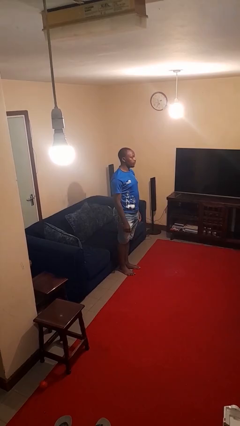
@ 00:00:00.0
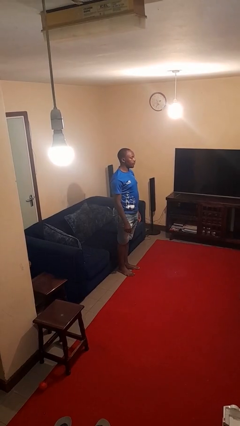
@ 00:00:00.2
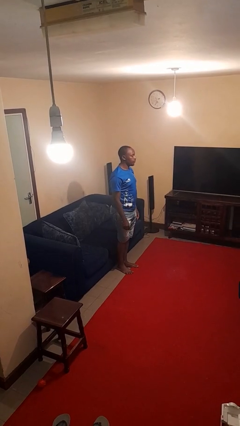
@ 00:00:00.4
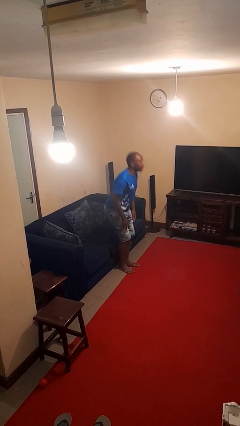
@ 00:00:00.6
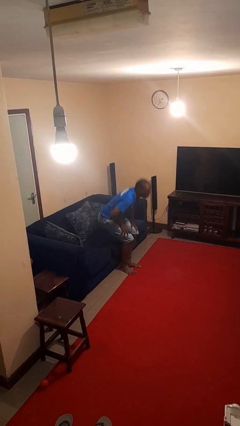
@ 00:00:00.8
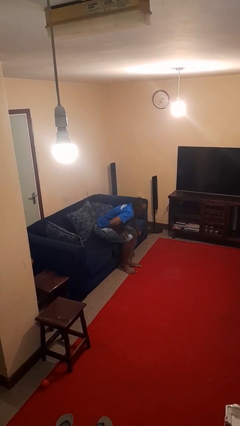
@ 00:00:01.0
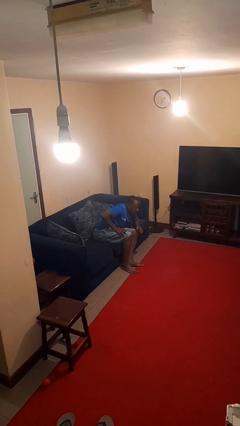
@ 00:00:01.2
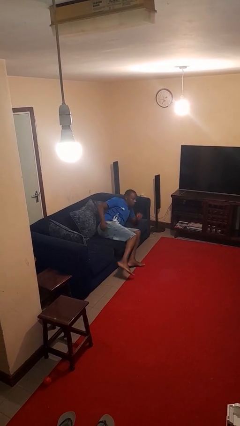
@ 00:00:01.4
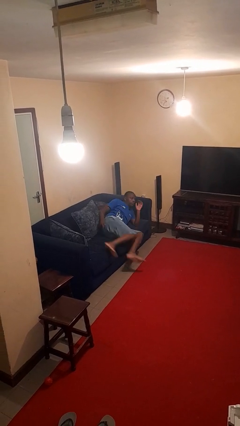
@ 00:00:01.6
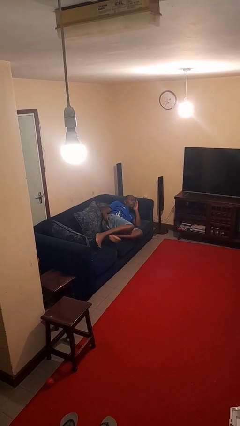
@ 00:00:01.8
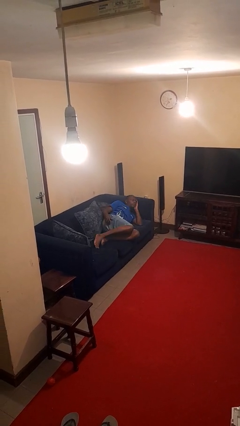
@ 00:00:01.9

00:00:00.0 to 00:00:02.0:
person lies down on couch

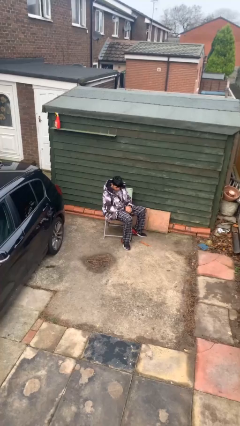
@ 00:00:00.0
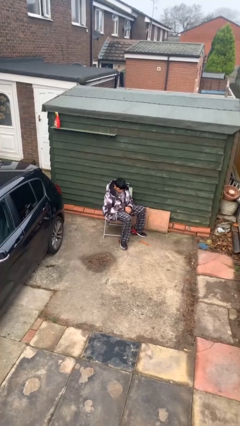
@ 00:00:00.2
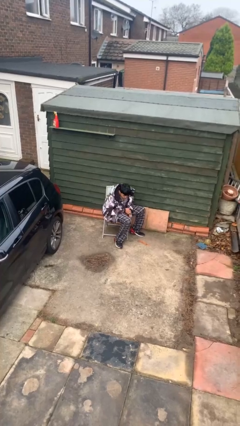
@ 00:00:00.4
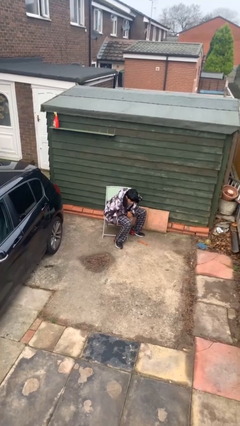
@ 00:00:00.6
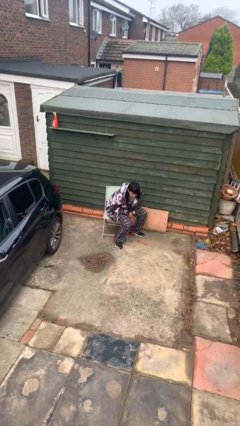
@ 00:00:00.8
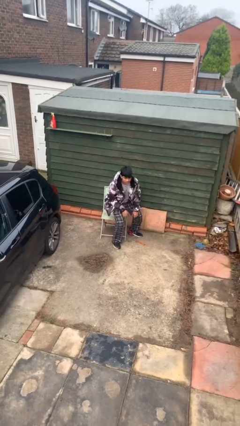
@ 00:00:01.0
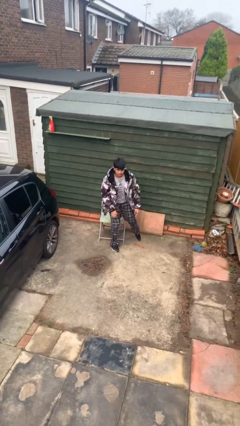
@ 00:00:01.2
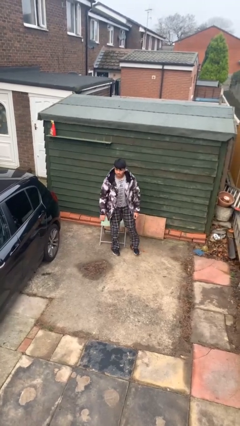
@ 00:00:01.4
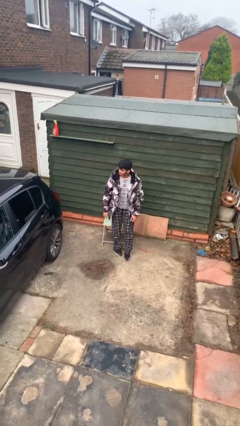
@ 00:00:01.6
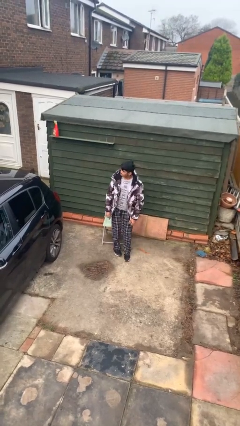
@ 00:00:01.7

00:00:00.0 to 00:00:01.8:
person stands up

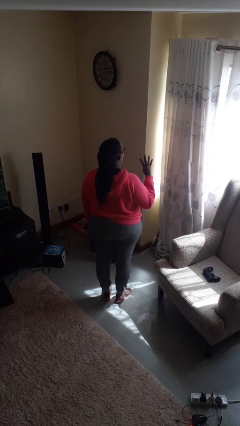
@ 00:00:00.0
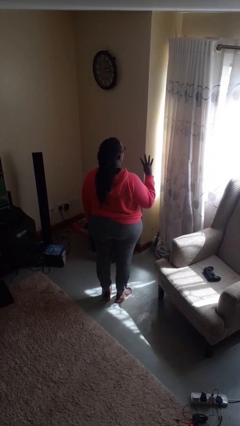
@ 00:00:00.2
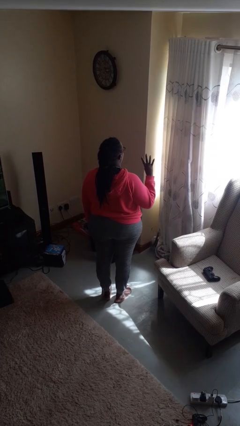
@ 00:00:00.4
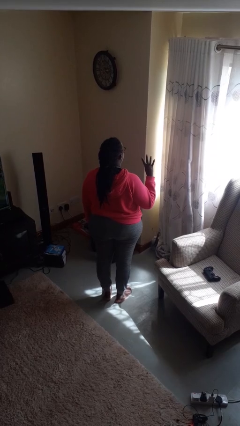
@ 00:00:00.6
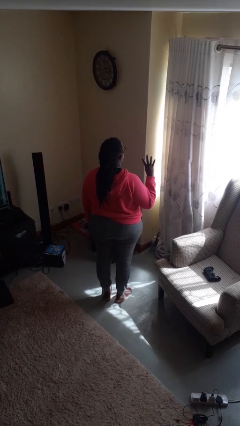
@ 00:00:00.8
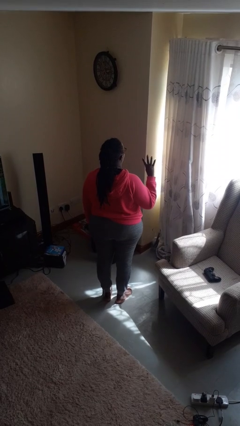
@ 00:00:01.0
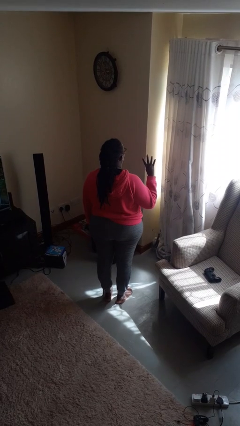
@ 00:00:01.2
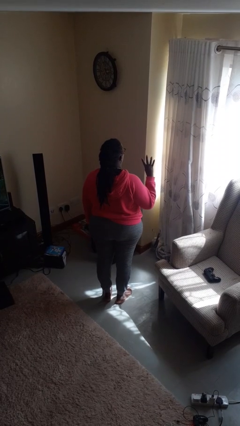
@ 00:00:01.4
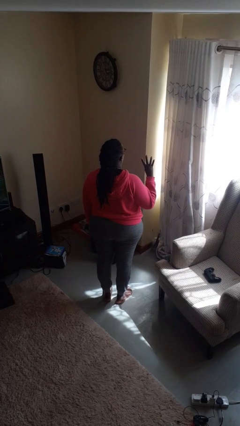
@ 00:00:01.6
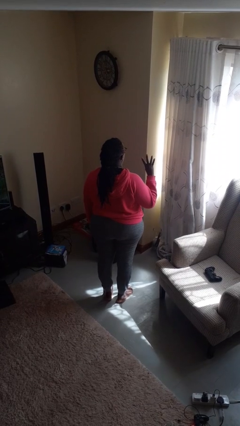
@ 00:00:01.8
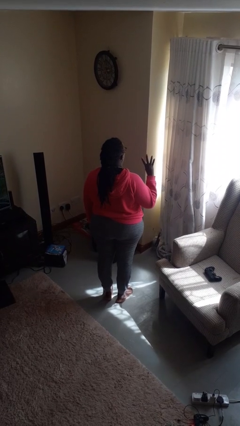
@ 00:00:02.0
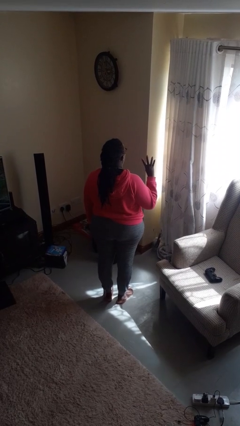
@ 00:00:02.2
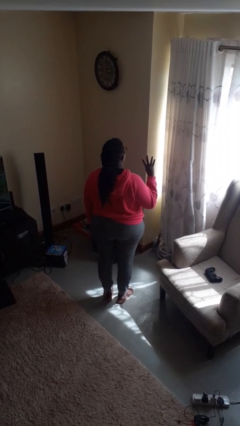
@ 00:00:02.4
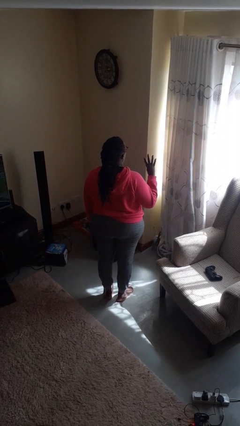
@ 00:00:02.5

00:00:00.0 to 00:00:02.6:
person gestures number four

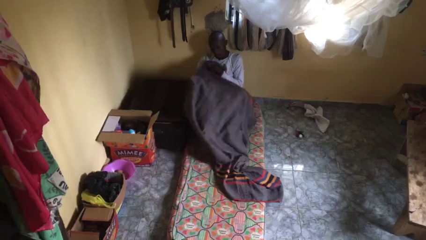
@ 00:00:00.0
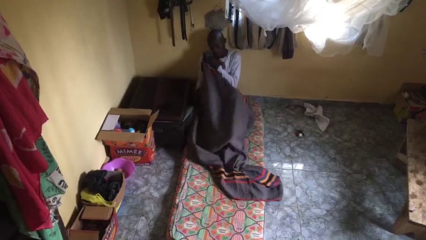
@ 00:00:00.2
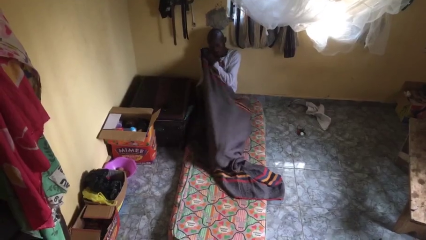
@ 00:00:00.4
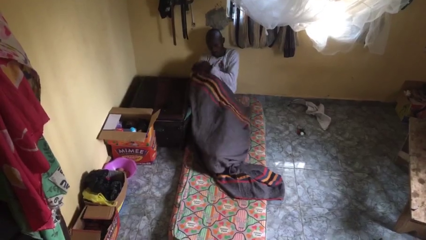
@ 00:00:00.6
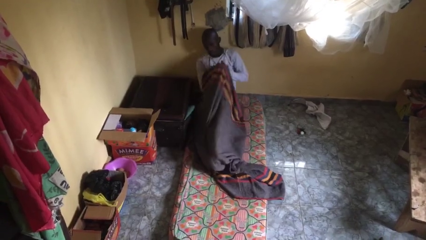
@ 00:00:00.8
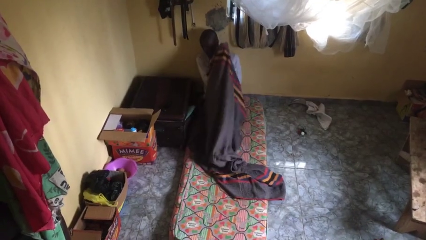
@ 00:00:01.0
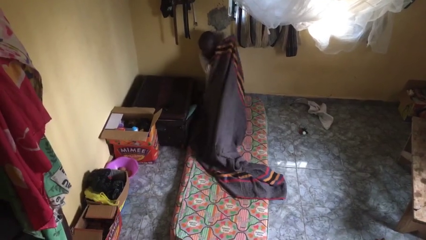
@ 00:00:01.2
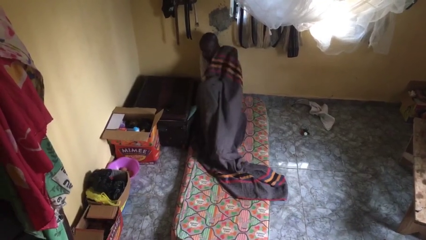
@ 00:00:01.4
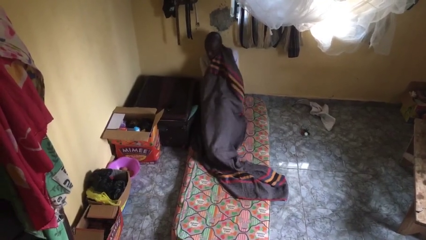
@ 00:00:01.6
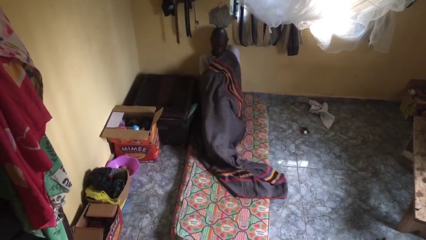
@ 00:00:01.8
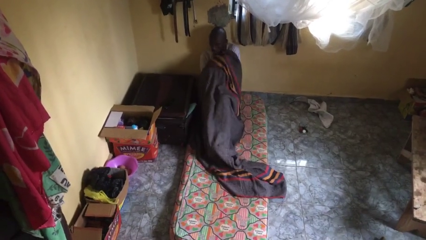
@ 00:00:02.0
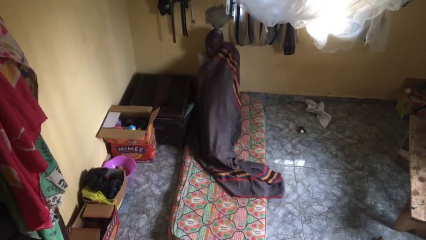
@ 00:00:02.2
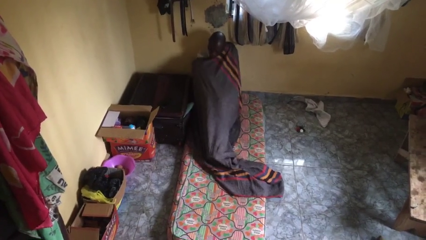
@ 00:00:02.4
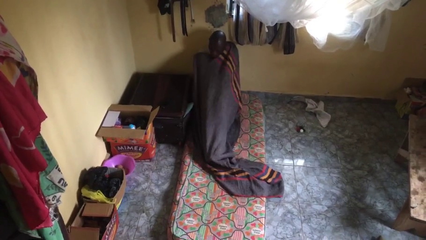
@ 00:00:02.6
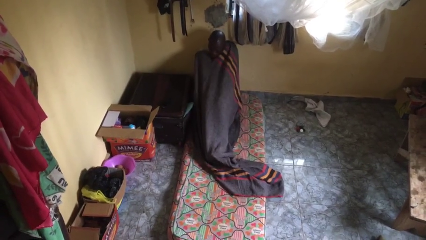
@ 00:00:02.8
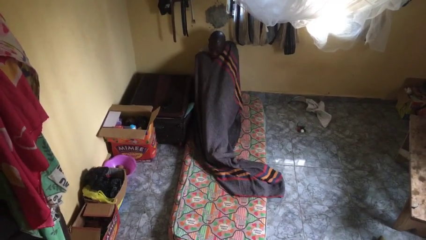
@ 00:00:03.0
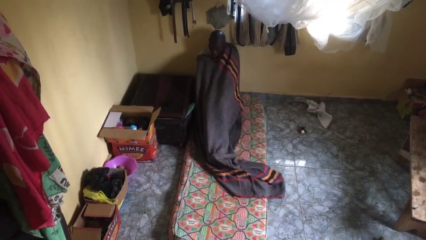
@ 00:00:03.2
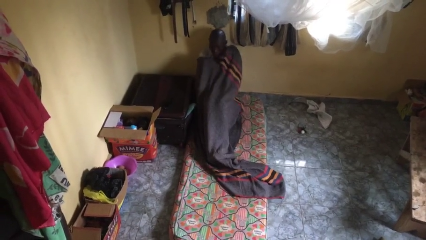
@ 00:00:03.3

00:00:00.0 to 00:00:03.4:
person covers with blanket

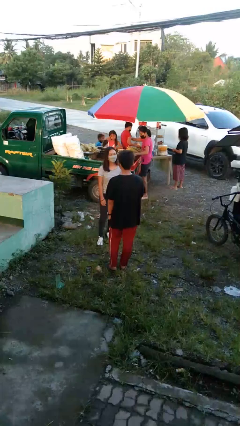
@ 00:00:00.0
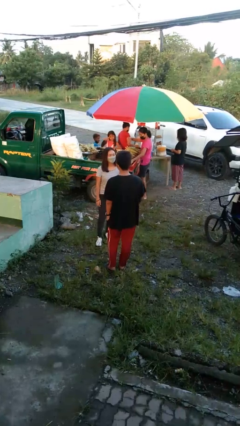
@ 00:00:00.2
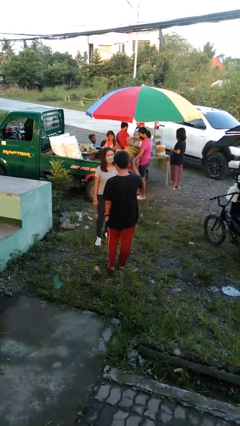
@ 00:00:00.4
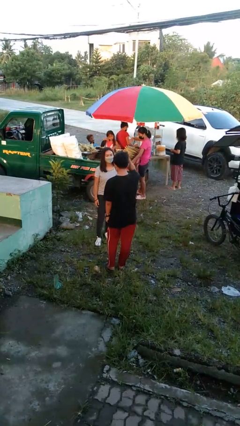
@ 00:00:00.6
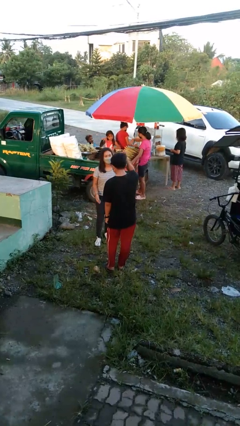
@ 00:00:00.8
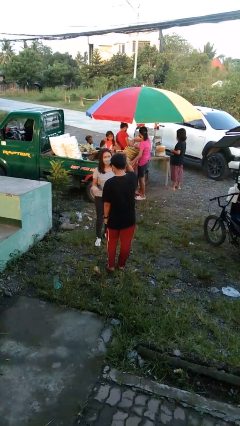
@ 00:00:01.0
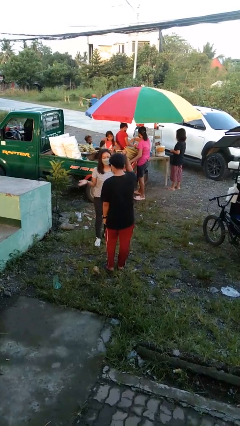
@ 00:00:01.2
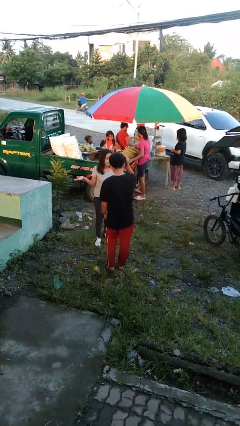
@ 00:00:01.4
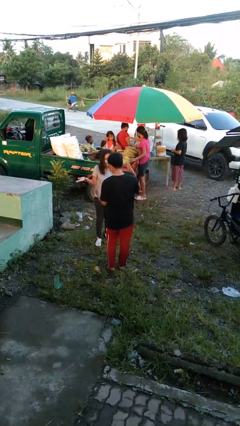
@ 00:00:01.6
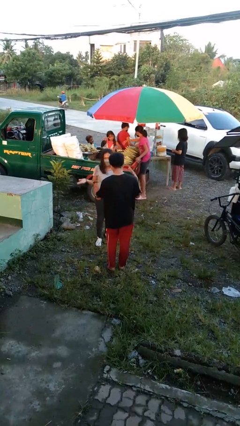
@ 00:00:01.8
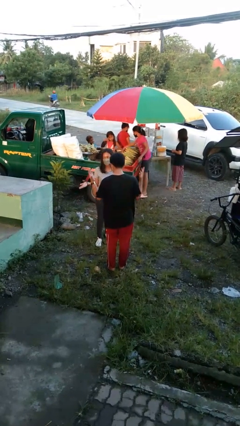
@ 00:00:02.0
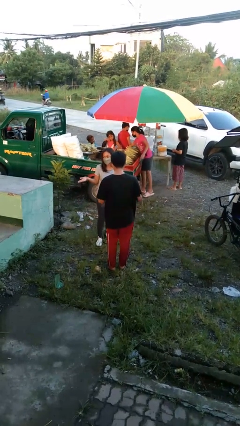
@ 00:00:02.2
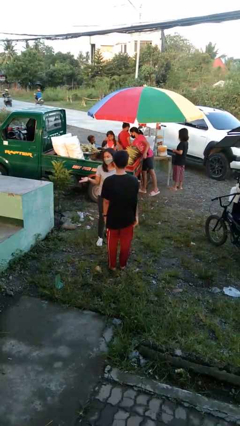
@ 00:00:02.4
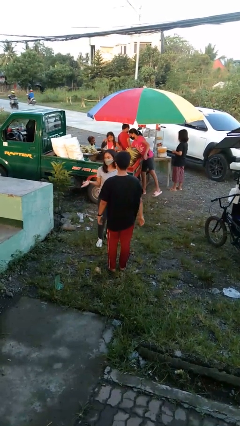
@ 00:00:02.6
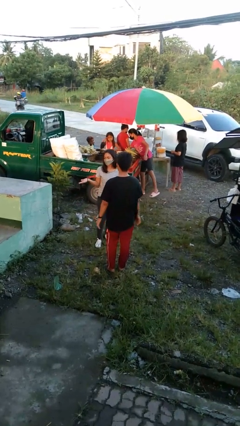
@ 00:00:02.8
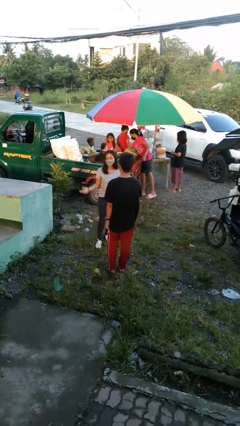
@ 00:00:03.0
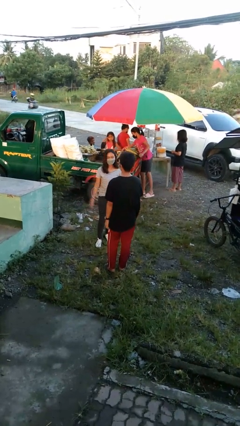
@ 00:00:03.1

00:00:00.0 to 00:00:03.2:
person talks to person

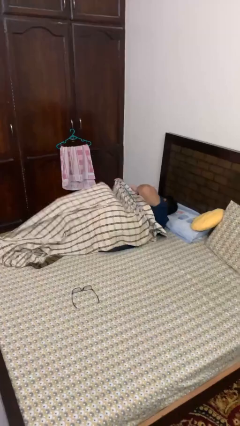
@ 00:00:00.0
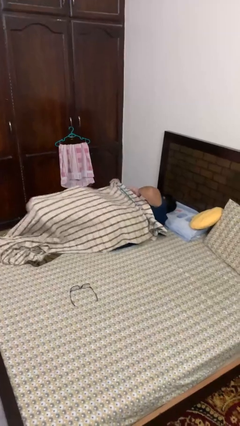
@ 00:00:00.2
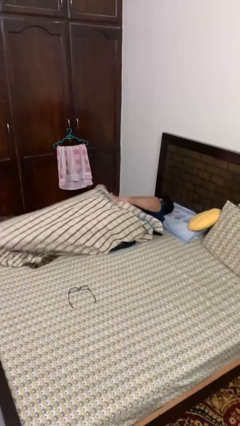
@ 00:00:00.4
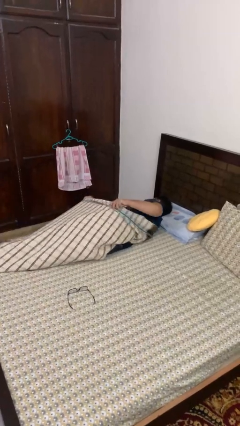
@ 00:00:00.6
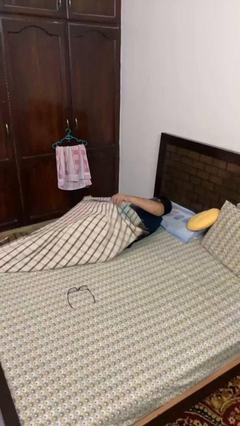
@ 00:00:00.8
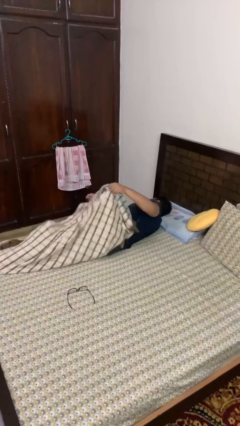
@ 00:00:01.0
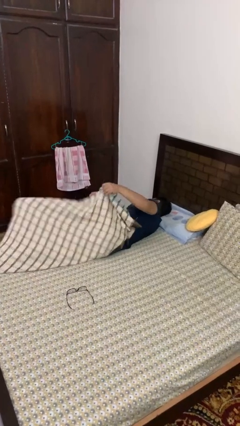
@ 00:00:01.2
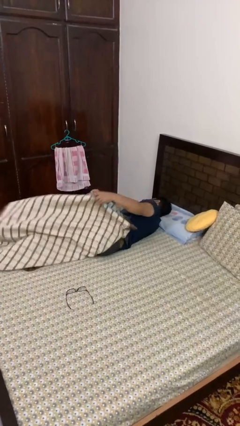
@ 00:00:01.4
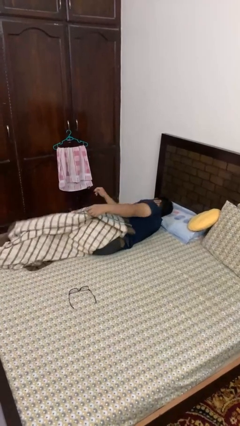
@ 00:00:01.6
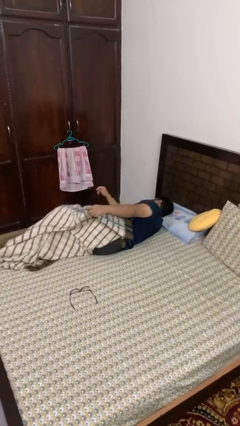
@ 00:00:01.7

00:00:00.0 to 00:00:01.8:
person uncovers with bedsheets

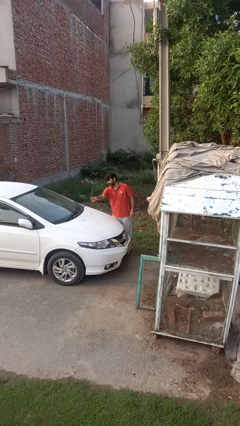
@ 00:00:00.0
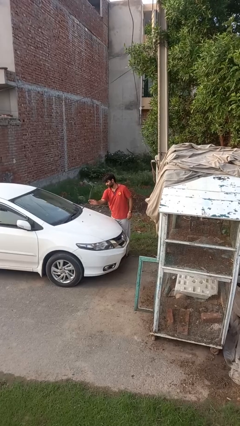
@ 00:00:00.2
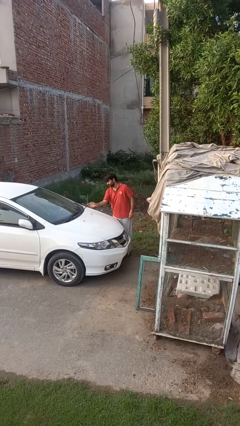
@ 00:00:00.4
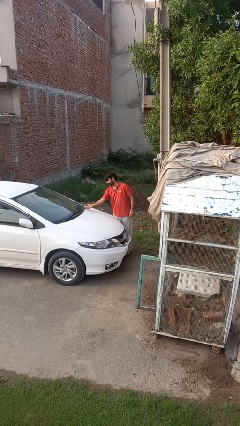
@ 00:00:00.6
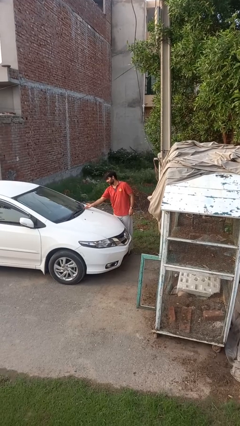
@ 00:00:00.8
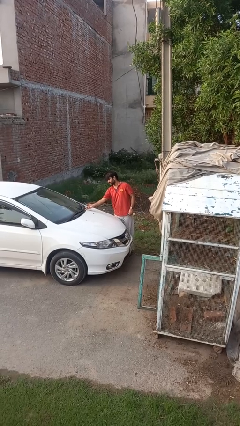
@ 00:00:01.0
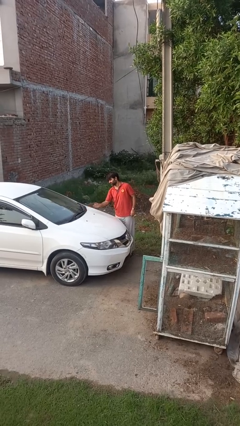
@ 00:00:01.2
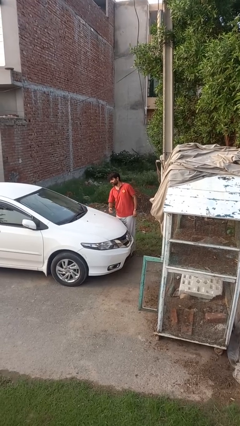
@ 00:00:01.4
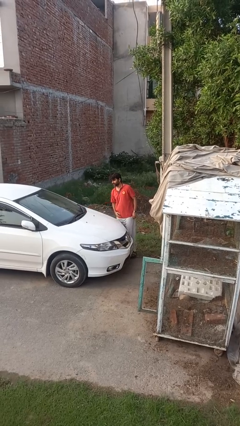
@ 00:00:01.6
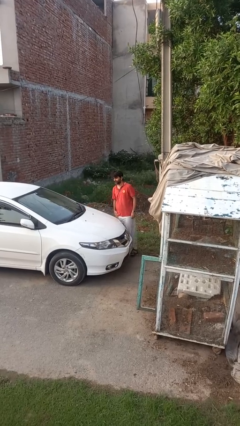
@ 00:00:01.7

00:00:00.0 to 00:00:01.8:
person flips down car wipers
